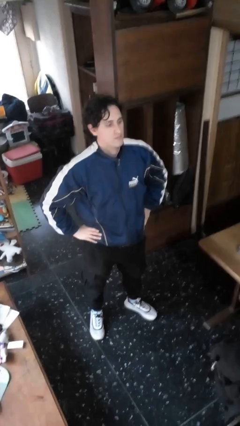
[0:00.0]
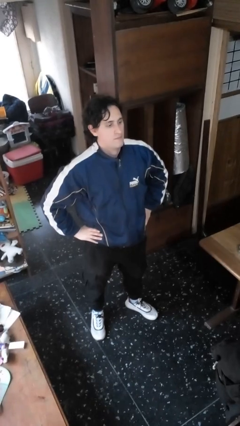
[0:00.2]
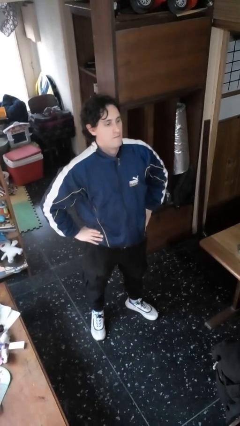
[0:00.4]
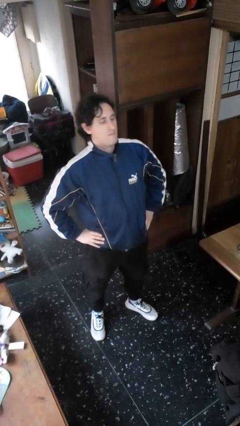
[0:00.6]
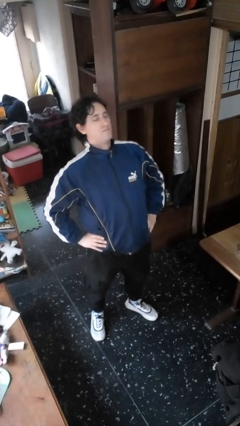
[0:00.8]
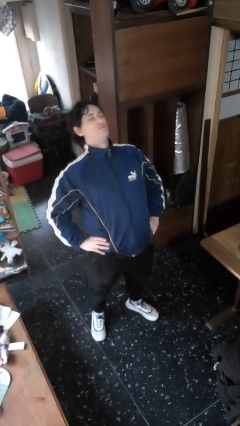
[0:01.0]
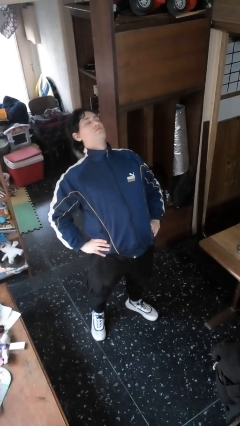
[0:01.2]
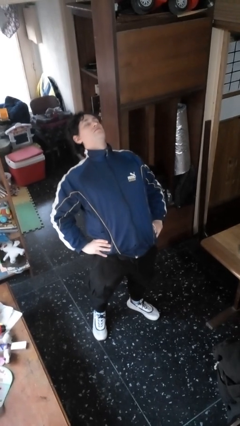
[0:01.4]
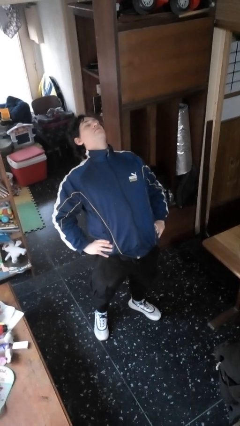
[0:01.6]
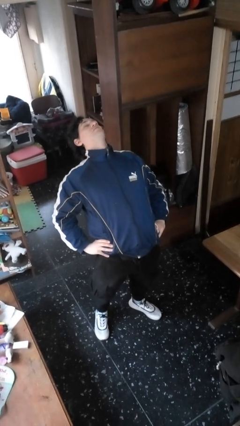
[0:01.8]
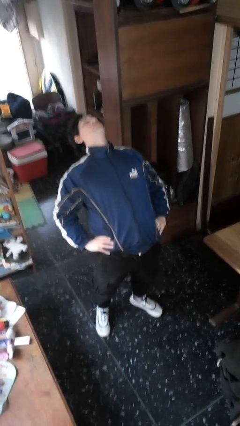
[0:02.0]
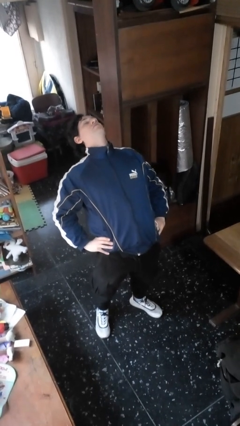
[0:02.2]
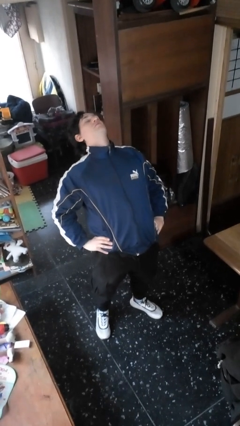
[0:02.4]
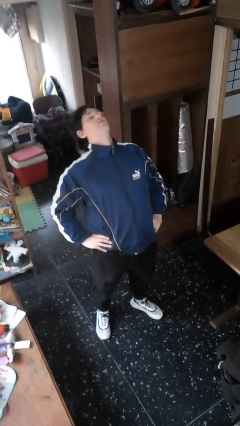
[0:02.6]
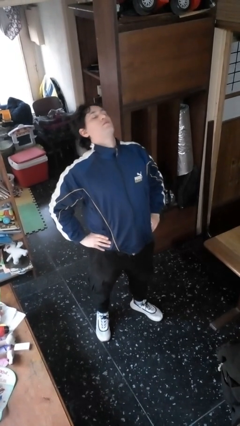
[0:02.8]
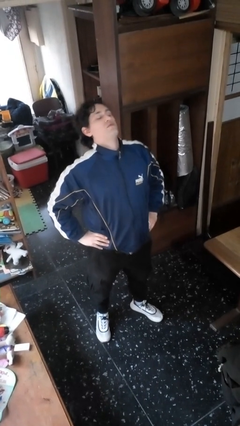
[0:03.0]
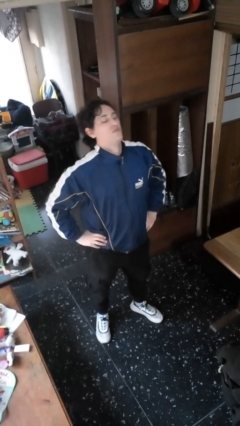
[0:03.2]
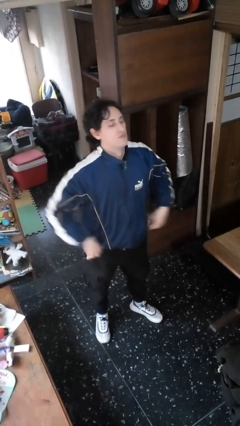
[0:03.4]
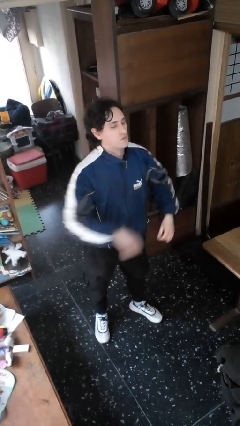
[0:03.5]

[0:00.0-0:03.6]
person stretches back

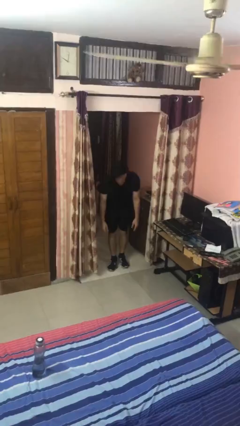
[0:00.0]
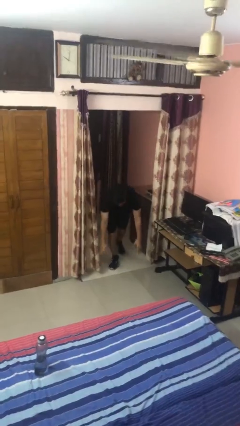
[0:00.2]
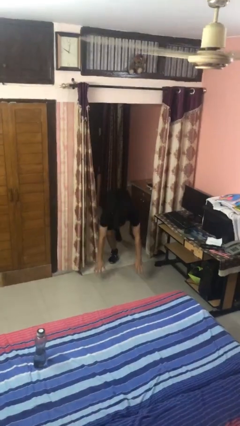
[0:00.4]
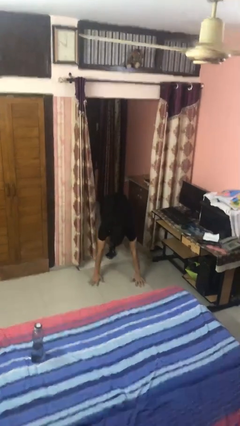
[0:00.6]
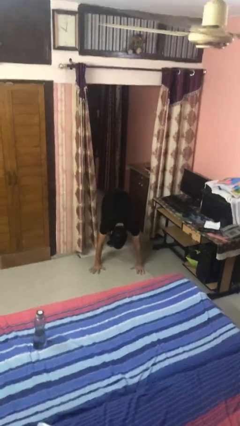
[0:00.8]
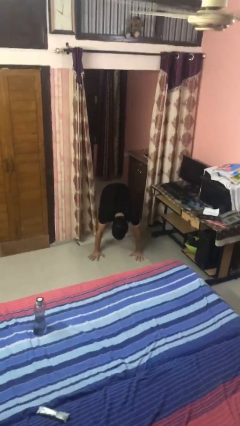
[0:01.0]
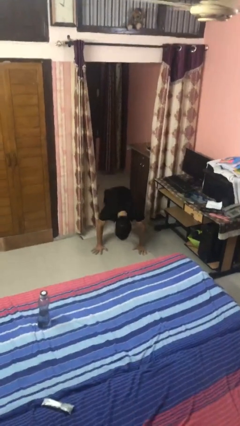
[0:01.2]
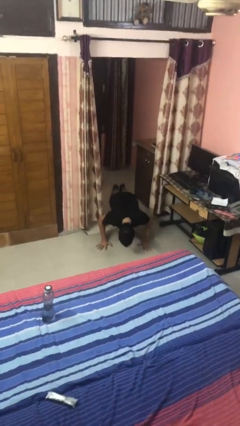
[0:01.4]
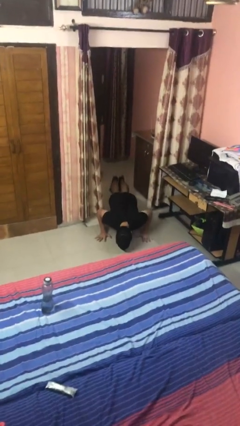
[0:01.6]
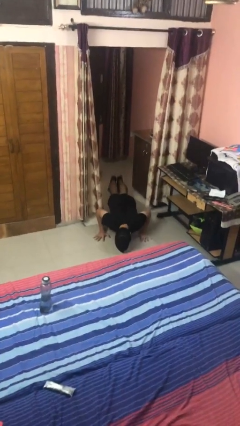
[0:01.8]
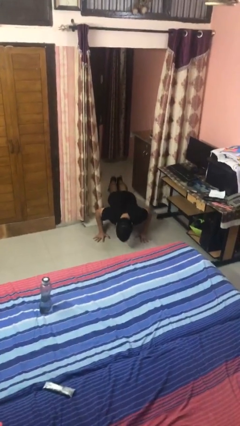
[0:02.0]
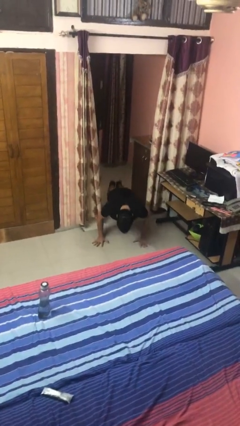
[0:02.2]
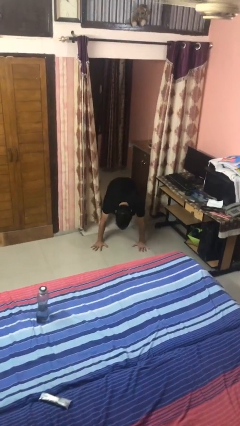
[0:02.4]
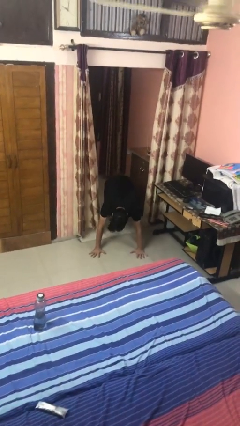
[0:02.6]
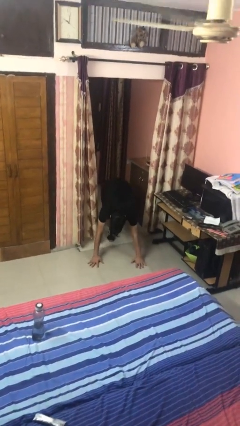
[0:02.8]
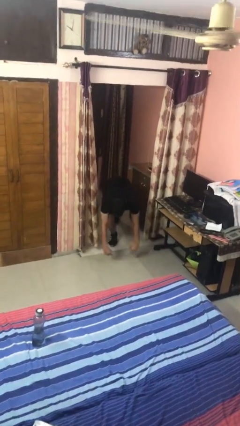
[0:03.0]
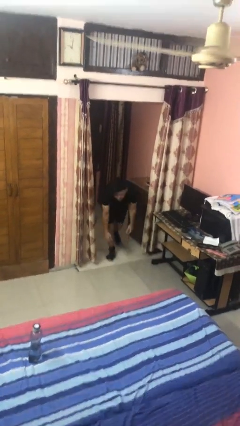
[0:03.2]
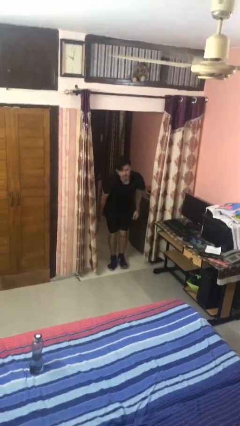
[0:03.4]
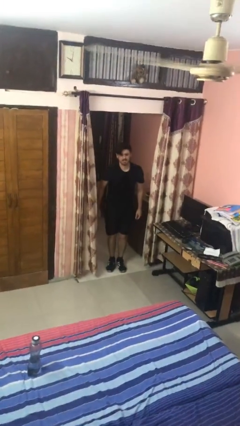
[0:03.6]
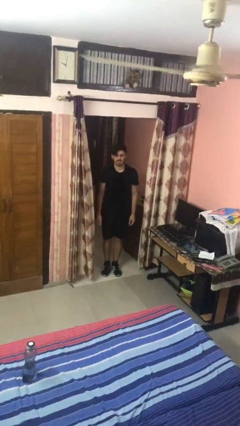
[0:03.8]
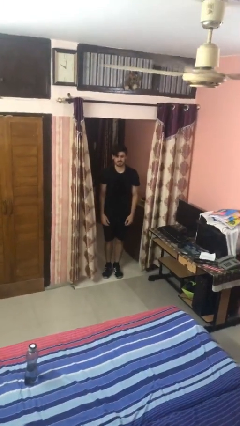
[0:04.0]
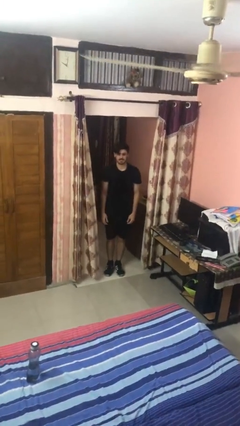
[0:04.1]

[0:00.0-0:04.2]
person exercises with pushup

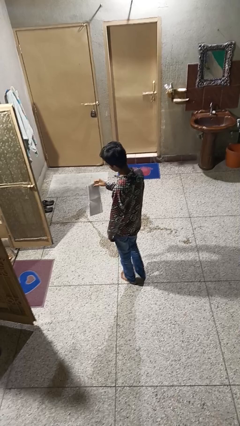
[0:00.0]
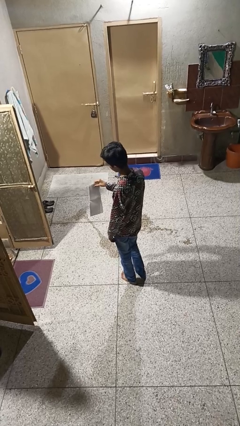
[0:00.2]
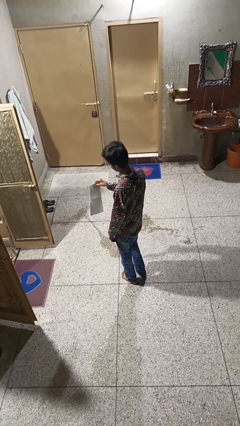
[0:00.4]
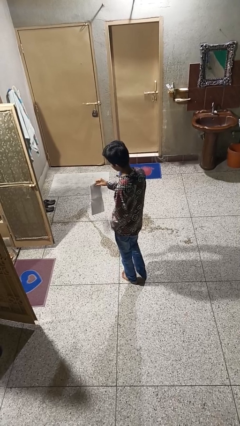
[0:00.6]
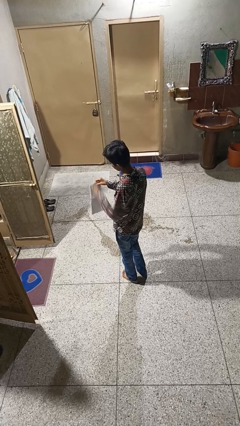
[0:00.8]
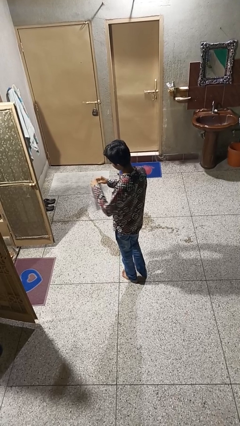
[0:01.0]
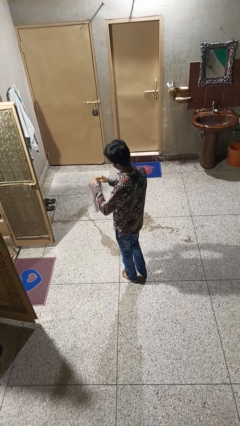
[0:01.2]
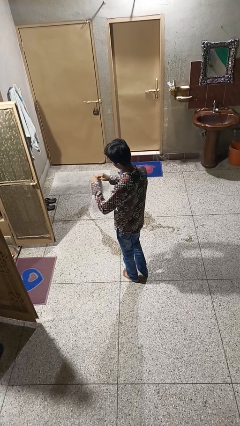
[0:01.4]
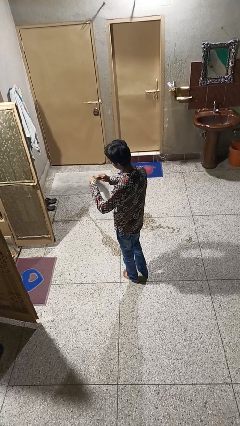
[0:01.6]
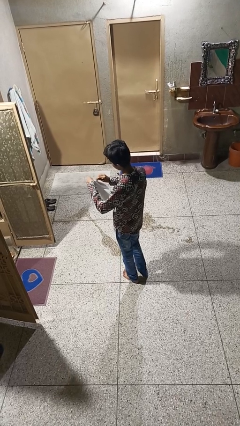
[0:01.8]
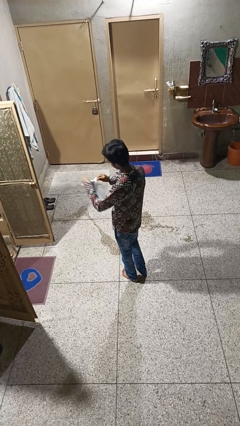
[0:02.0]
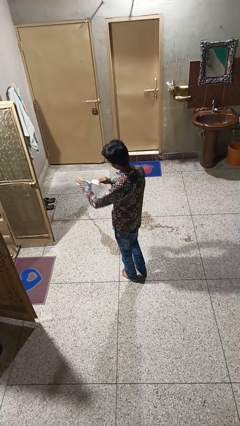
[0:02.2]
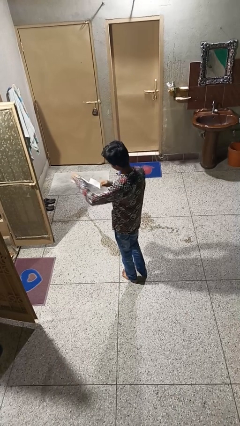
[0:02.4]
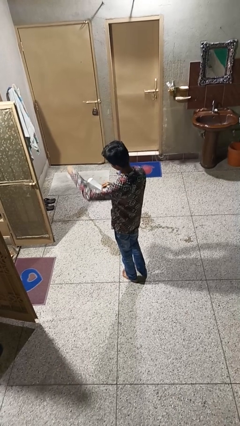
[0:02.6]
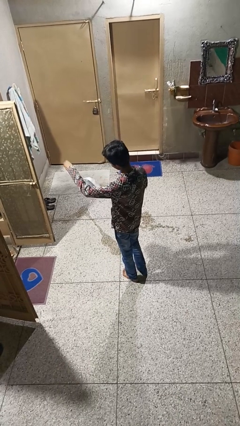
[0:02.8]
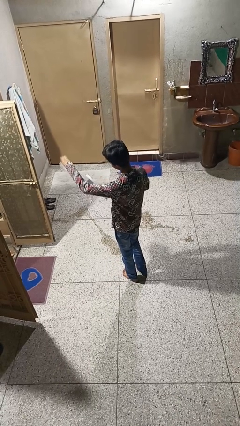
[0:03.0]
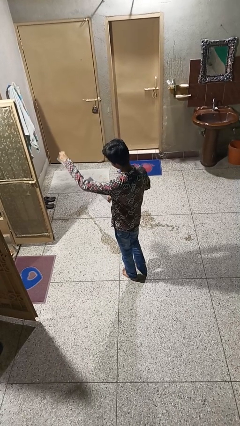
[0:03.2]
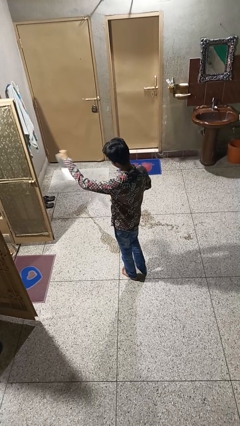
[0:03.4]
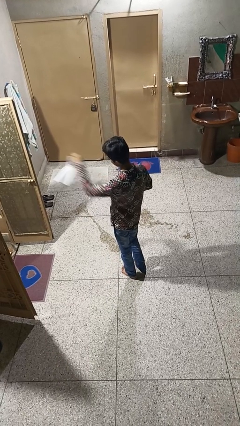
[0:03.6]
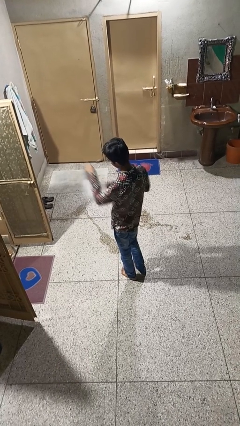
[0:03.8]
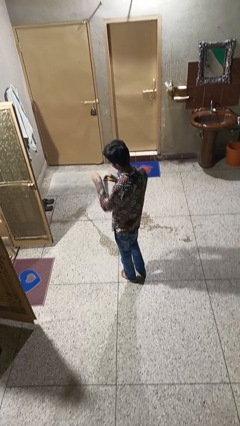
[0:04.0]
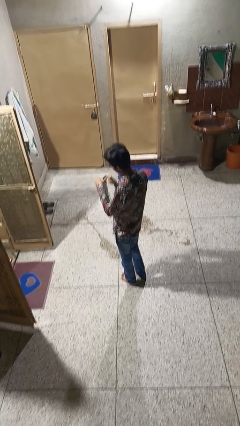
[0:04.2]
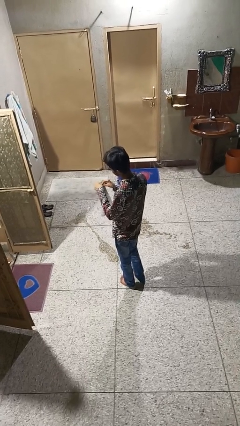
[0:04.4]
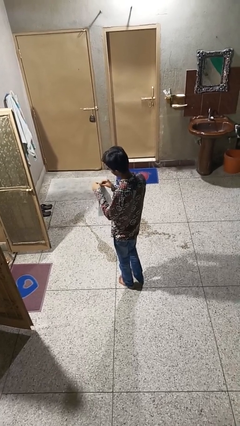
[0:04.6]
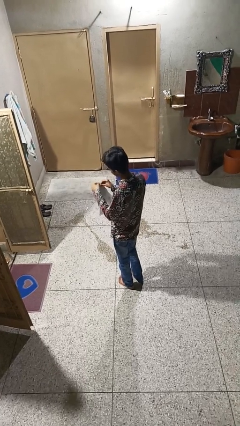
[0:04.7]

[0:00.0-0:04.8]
person tears paper

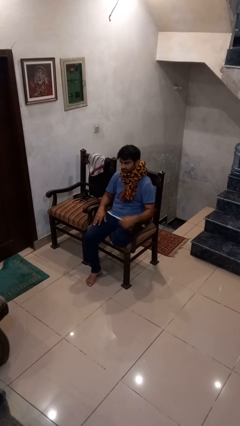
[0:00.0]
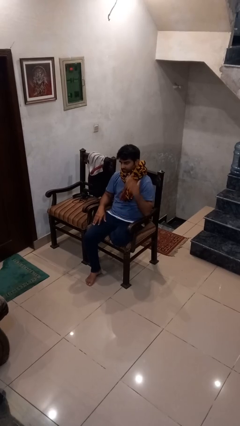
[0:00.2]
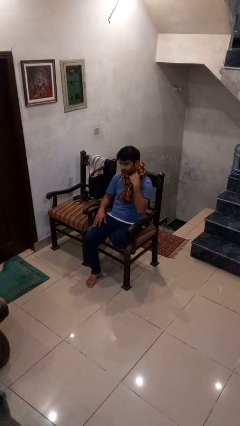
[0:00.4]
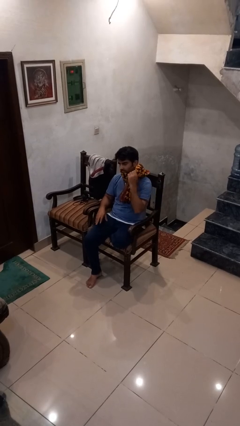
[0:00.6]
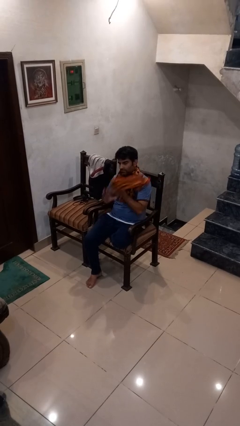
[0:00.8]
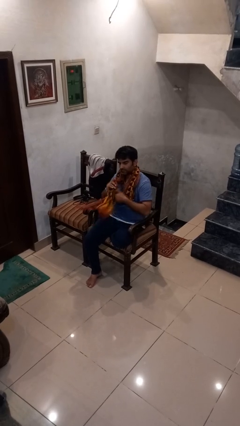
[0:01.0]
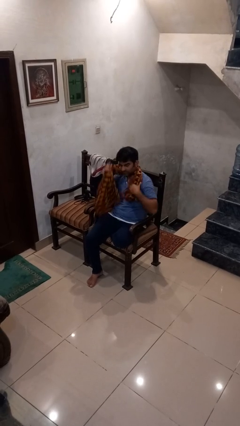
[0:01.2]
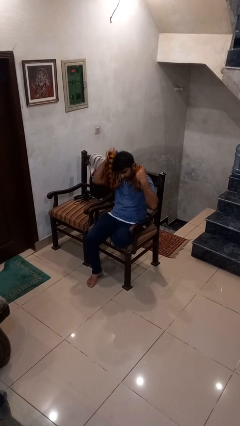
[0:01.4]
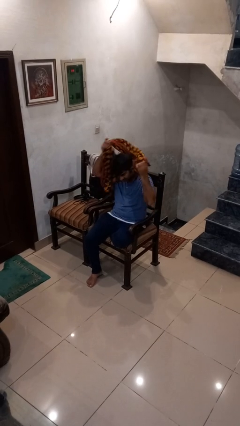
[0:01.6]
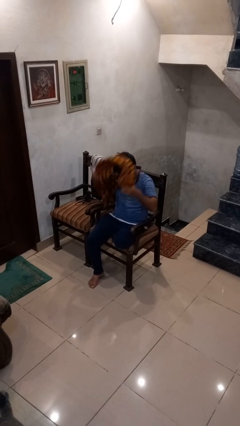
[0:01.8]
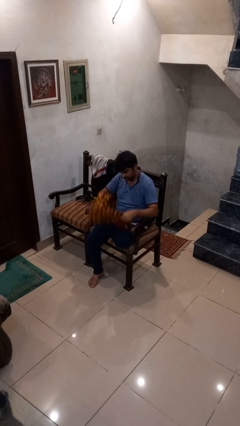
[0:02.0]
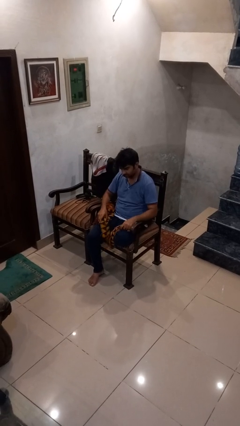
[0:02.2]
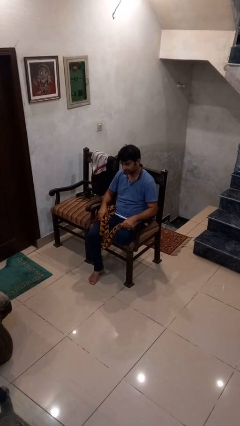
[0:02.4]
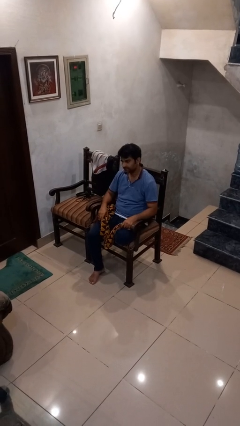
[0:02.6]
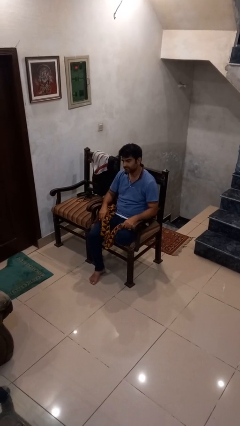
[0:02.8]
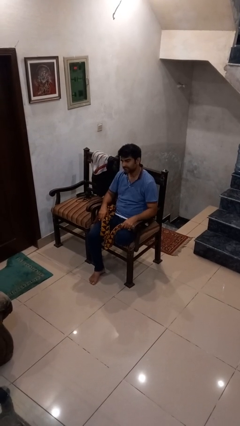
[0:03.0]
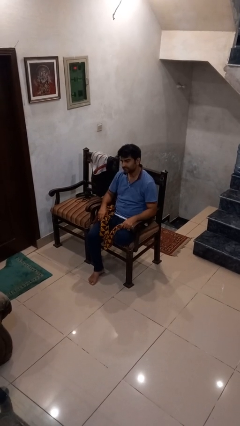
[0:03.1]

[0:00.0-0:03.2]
person takes off scarf

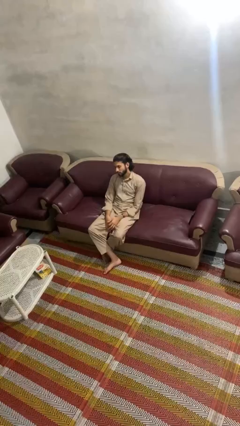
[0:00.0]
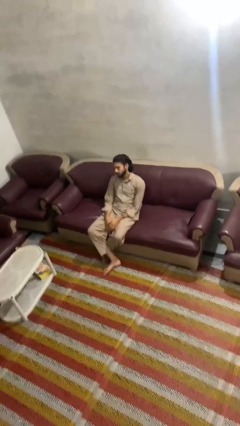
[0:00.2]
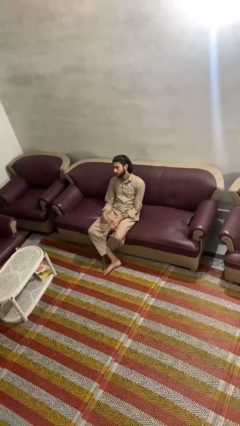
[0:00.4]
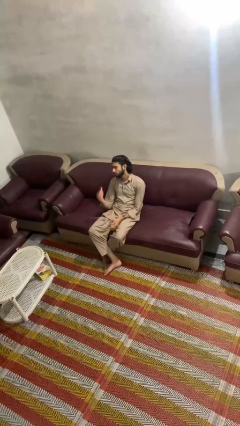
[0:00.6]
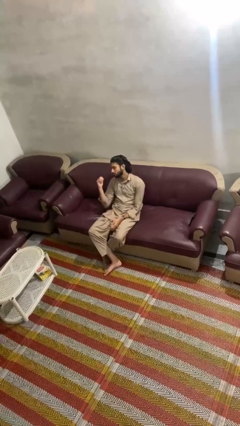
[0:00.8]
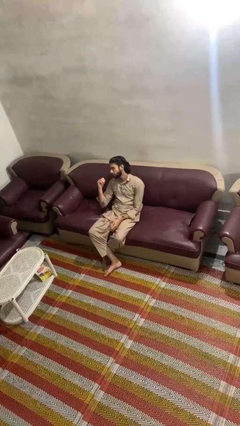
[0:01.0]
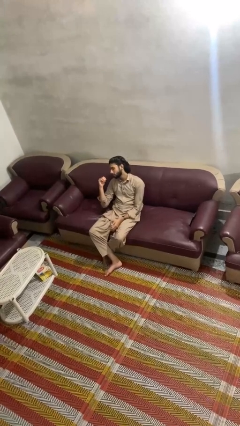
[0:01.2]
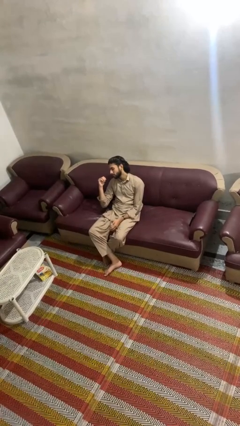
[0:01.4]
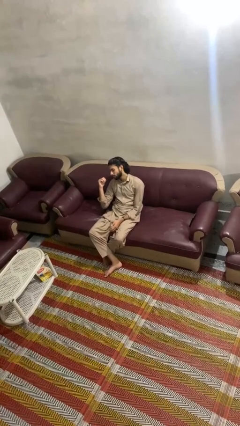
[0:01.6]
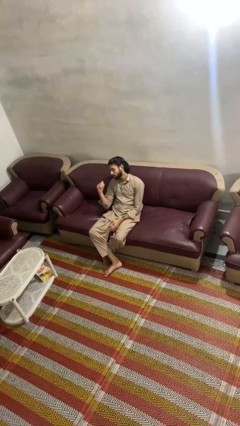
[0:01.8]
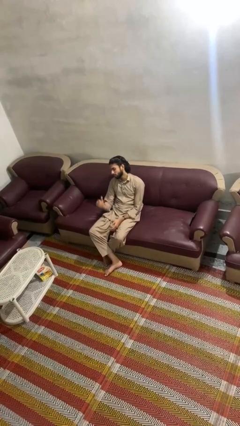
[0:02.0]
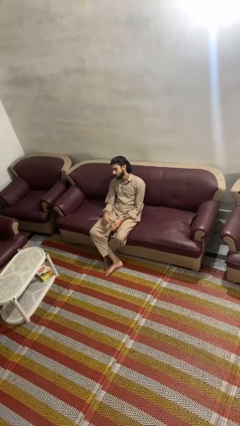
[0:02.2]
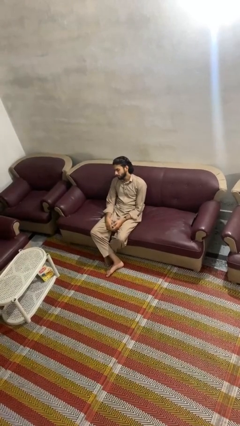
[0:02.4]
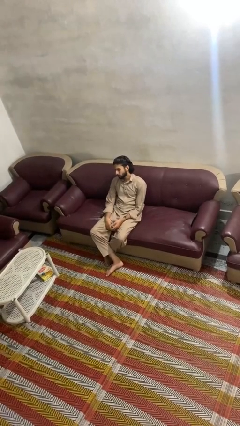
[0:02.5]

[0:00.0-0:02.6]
person gestures behind me
